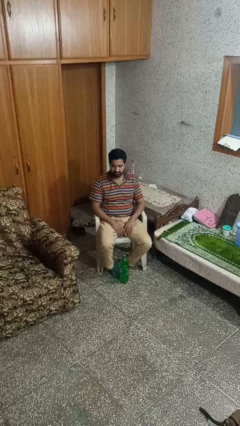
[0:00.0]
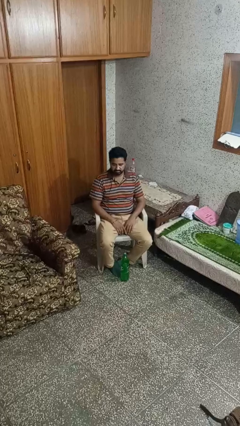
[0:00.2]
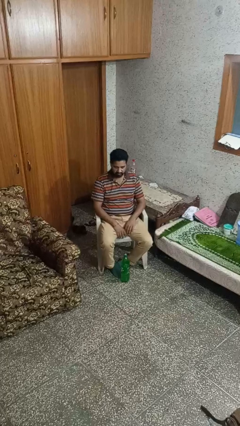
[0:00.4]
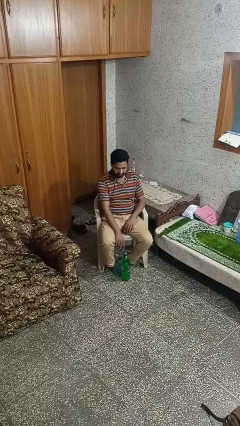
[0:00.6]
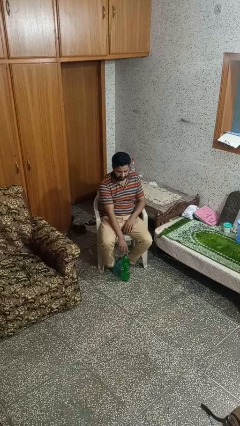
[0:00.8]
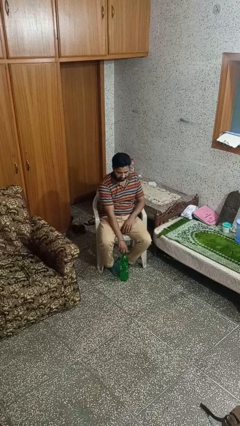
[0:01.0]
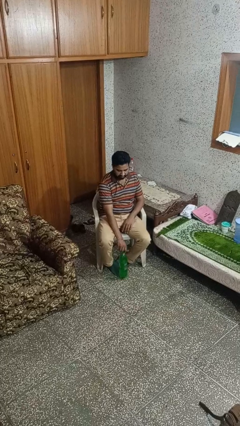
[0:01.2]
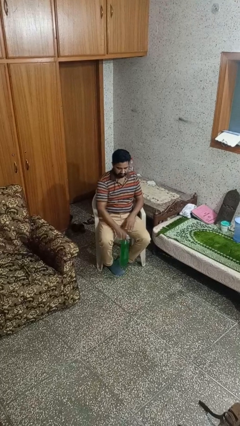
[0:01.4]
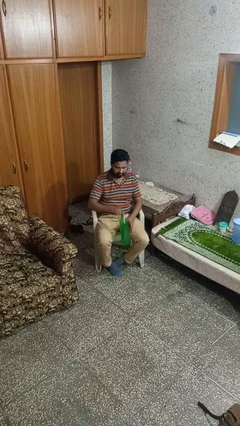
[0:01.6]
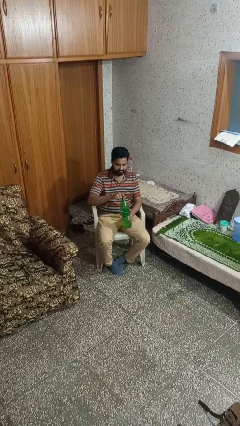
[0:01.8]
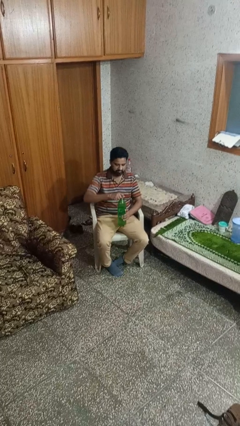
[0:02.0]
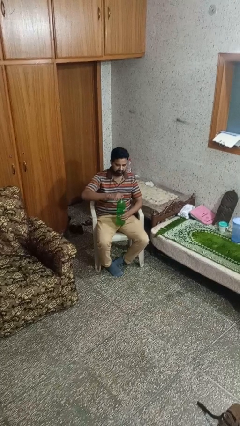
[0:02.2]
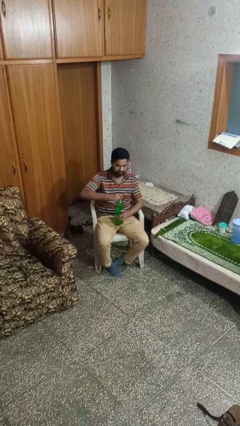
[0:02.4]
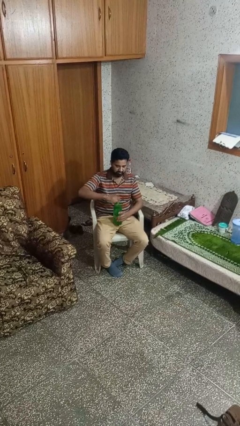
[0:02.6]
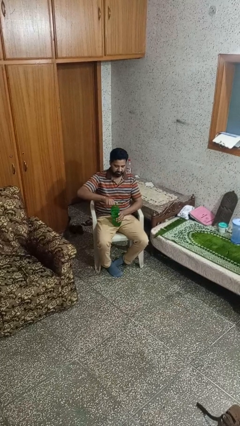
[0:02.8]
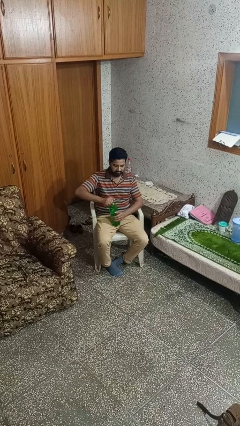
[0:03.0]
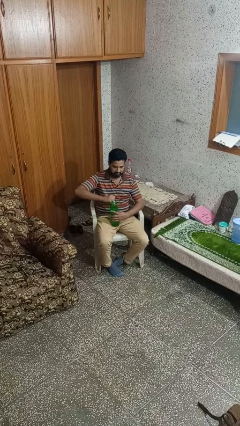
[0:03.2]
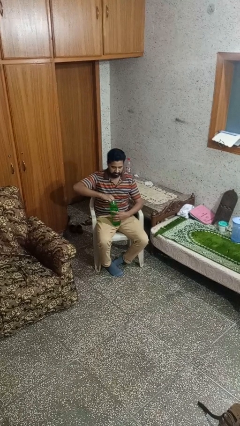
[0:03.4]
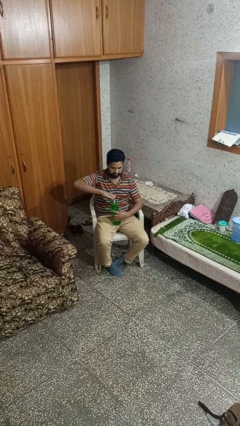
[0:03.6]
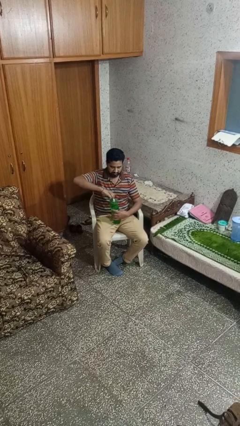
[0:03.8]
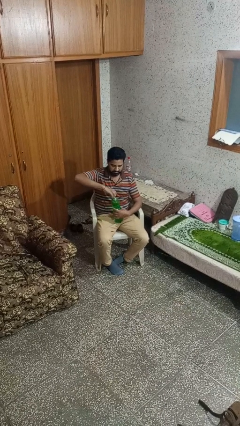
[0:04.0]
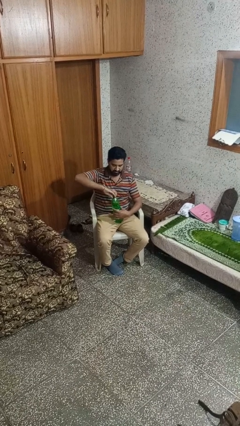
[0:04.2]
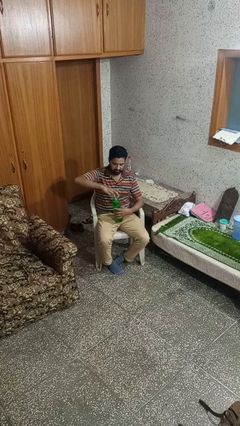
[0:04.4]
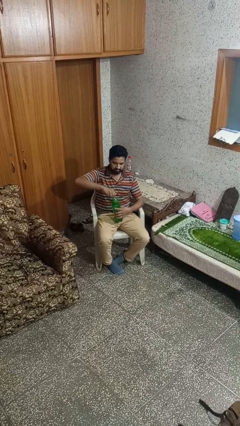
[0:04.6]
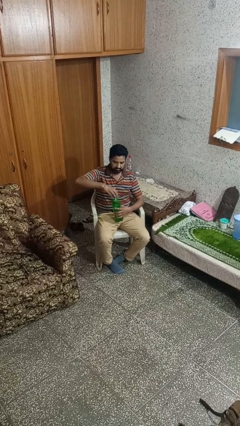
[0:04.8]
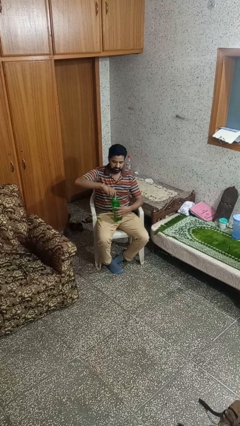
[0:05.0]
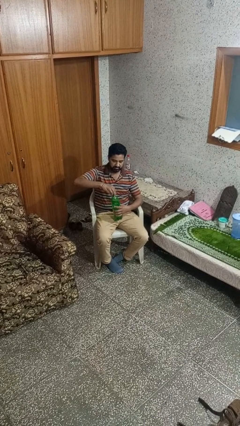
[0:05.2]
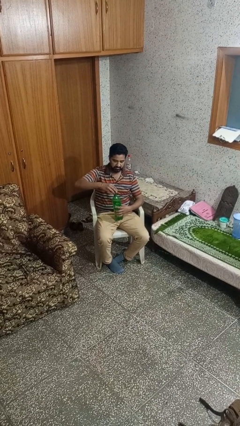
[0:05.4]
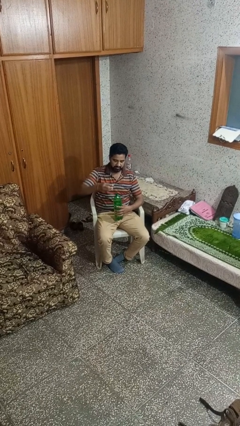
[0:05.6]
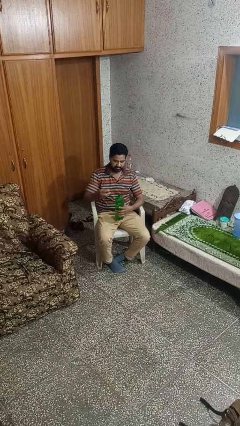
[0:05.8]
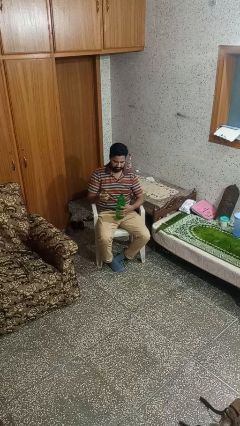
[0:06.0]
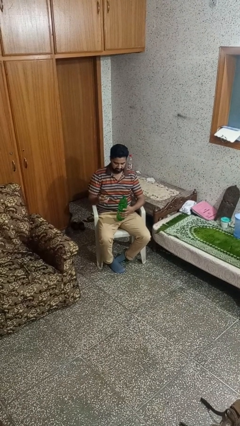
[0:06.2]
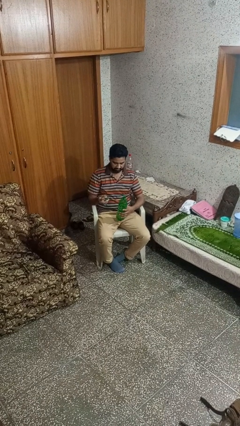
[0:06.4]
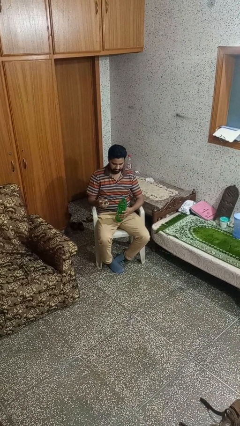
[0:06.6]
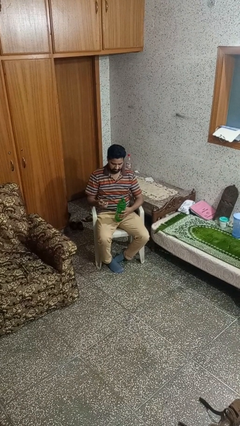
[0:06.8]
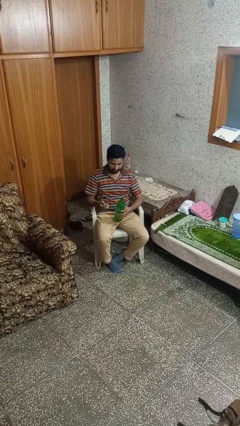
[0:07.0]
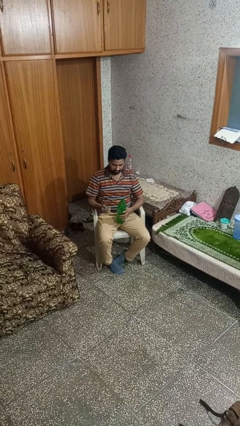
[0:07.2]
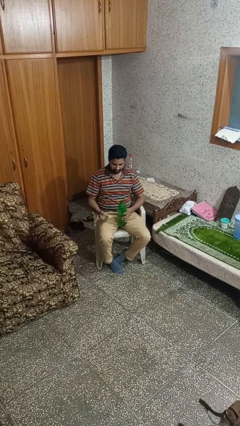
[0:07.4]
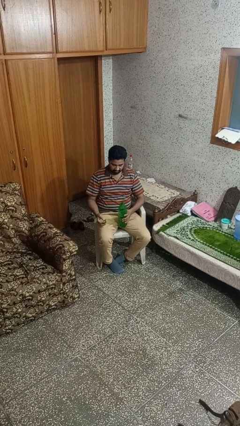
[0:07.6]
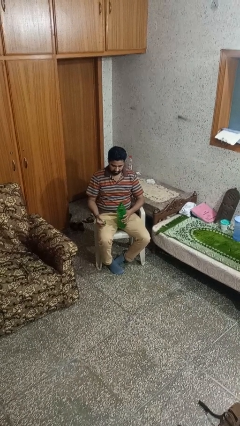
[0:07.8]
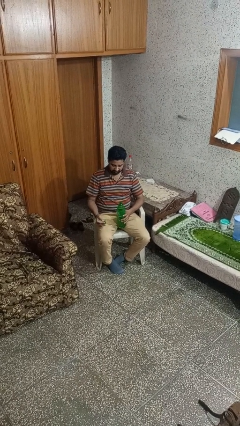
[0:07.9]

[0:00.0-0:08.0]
person unscrews lid from bottle

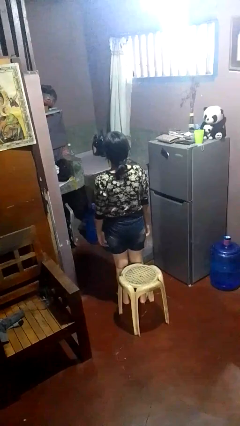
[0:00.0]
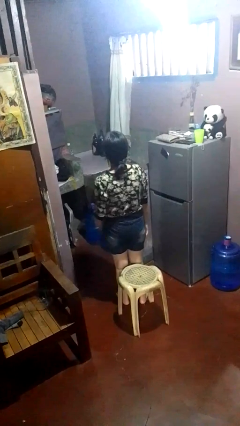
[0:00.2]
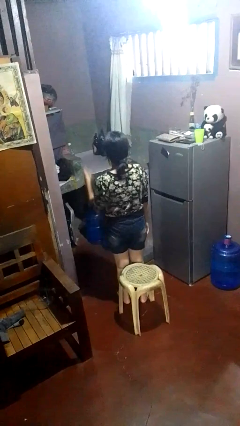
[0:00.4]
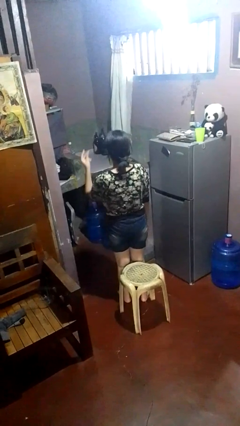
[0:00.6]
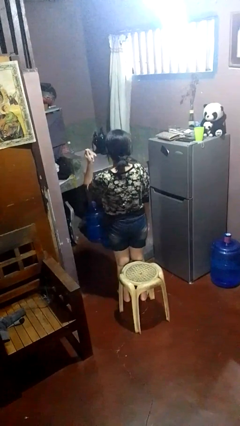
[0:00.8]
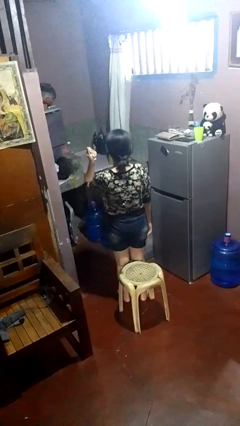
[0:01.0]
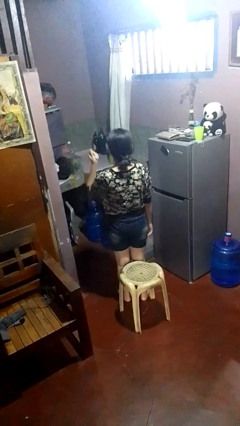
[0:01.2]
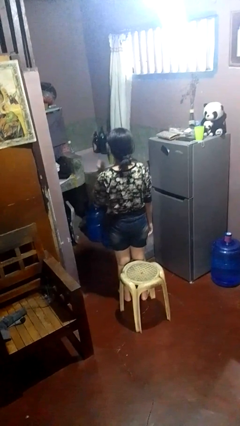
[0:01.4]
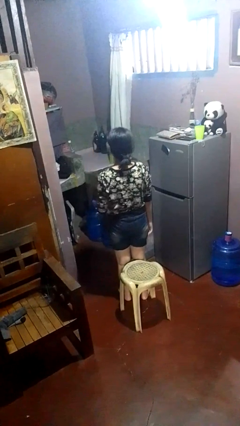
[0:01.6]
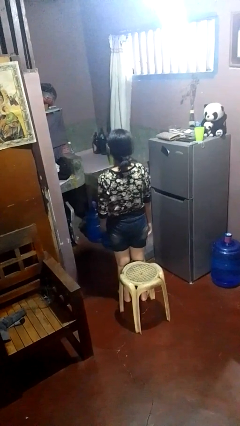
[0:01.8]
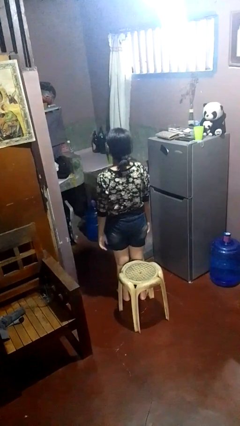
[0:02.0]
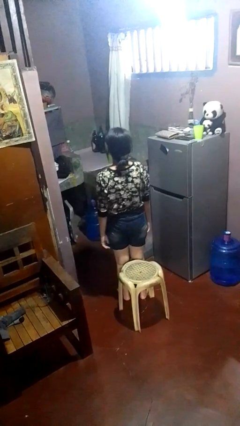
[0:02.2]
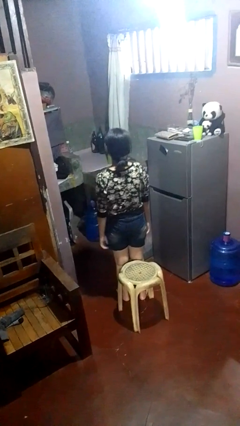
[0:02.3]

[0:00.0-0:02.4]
person snaps fingers

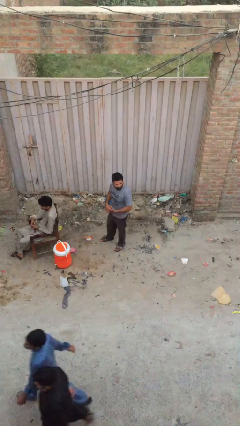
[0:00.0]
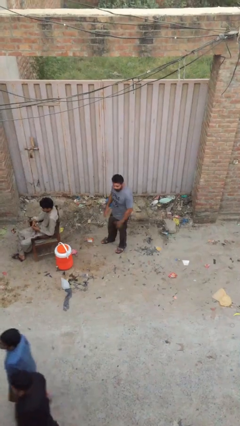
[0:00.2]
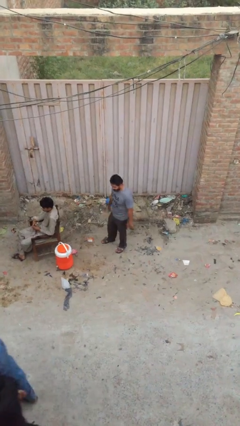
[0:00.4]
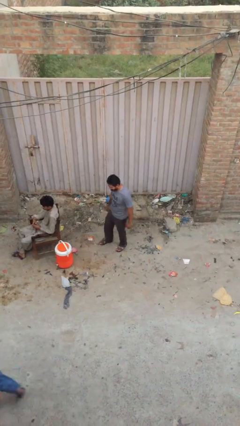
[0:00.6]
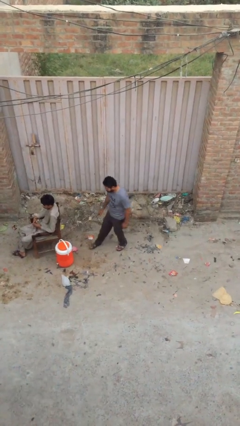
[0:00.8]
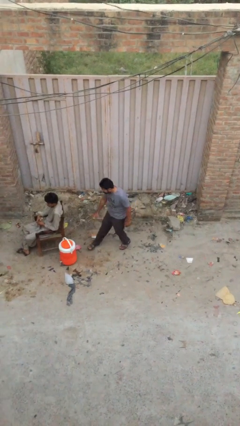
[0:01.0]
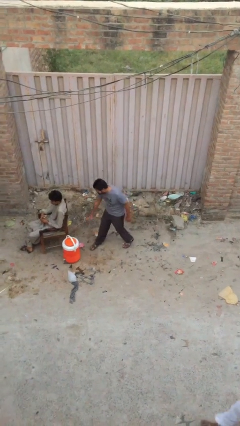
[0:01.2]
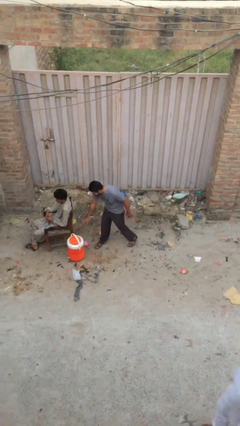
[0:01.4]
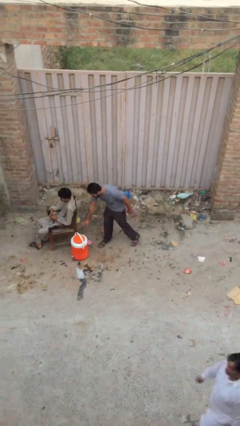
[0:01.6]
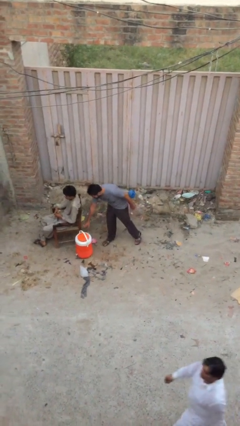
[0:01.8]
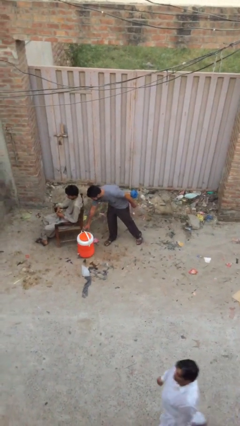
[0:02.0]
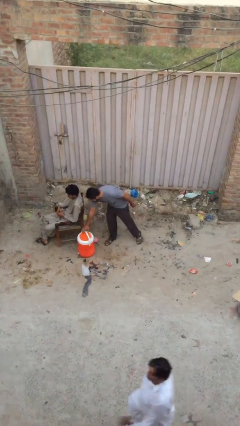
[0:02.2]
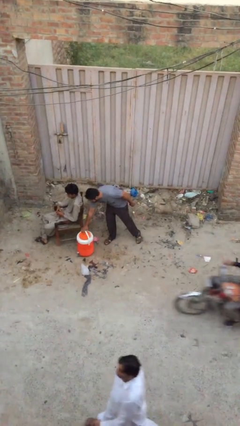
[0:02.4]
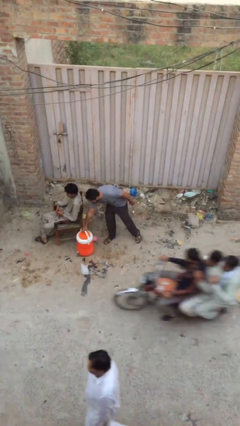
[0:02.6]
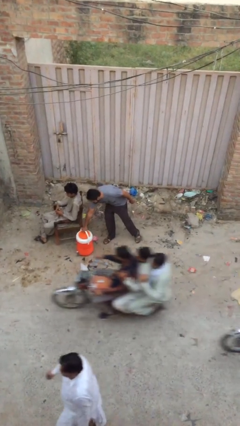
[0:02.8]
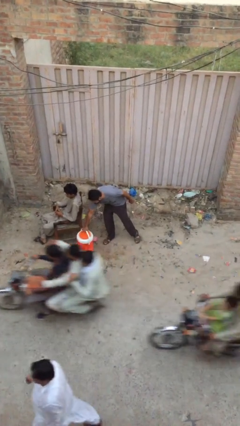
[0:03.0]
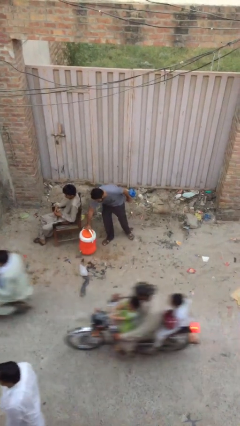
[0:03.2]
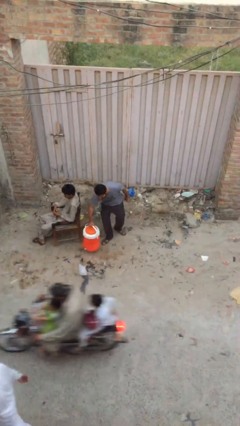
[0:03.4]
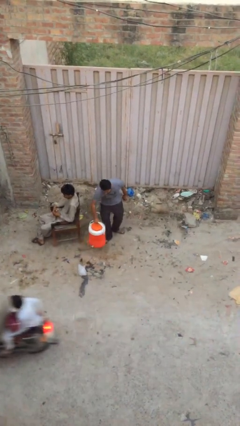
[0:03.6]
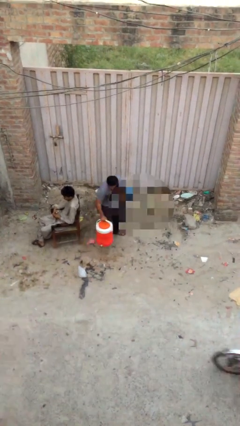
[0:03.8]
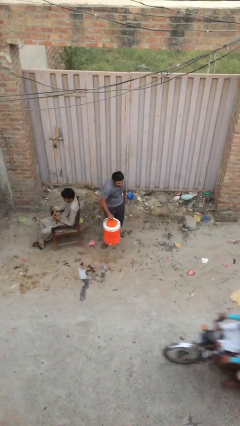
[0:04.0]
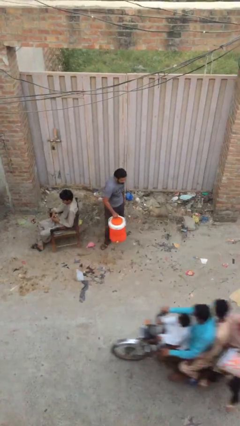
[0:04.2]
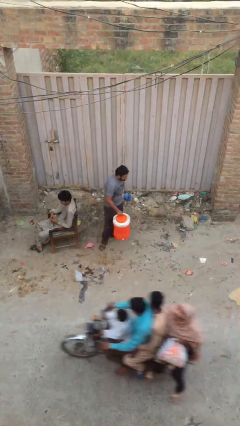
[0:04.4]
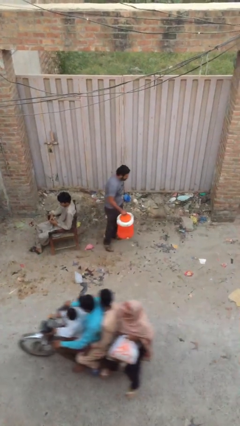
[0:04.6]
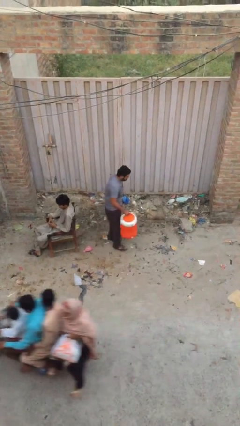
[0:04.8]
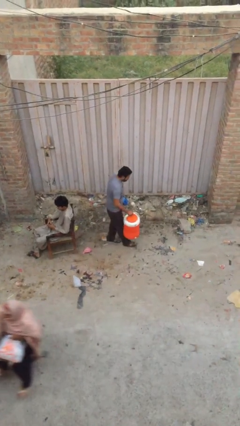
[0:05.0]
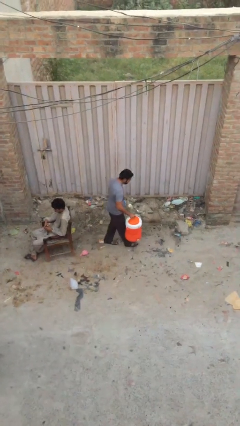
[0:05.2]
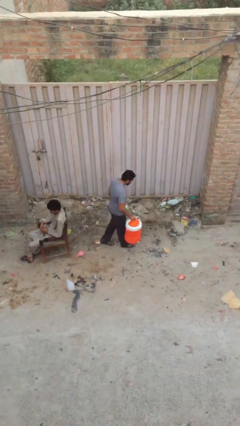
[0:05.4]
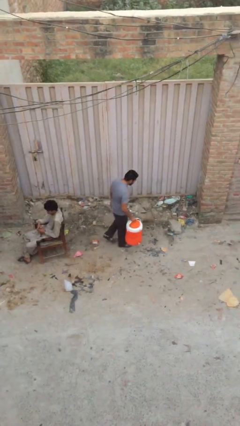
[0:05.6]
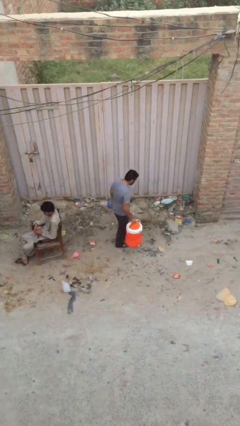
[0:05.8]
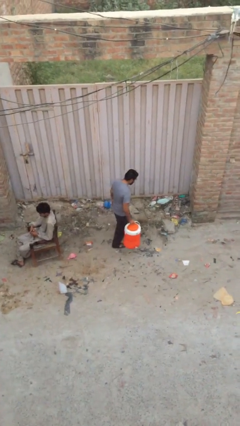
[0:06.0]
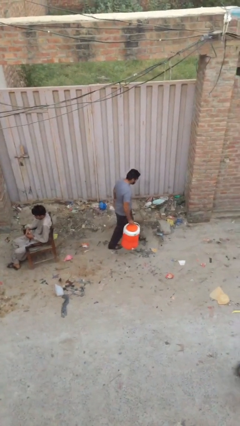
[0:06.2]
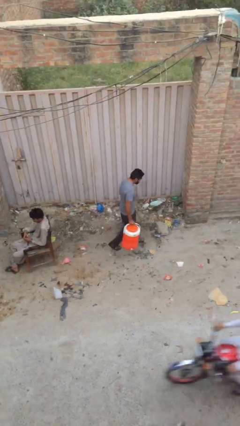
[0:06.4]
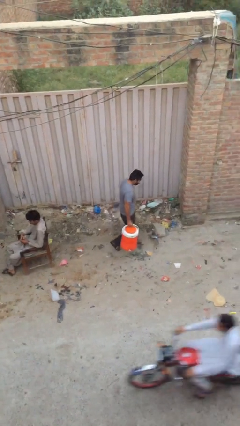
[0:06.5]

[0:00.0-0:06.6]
person steals object from person

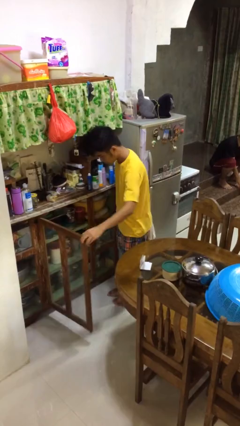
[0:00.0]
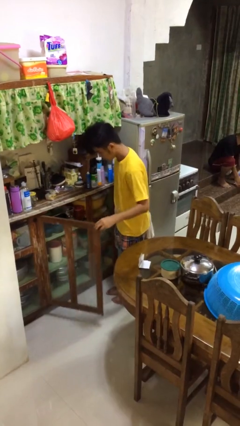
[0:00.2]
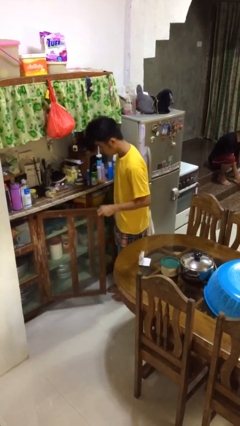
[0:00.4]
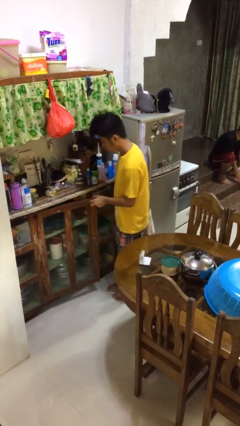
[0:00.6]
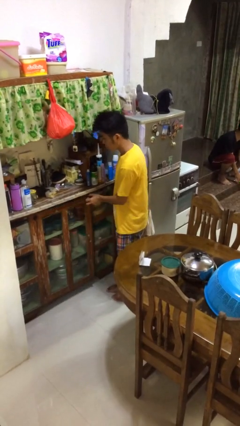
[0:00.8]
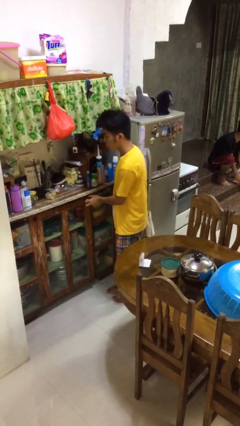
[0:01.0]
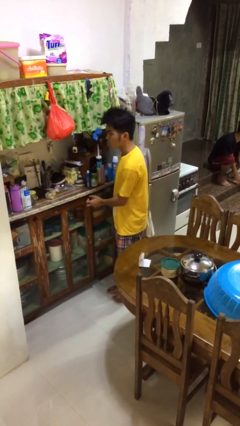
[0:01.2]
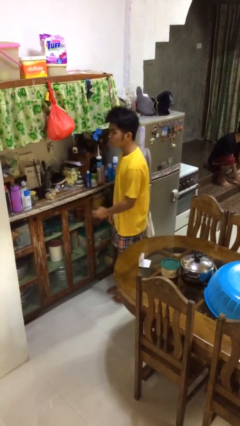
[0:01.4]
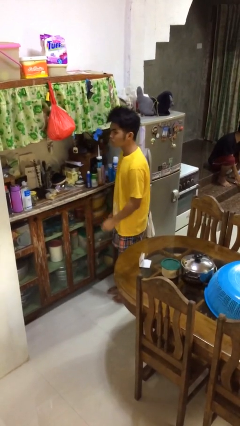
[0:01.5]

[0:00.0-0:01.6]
person closes cabinet
